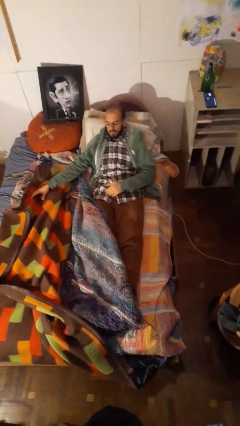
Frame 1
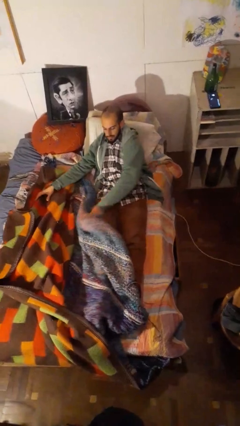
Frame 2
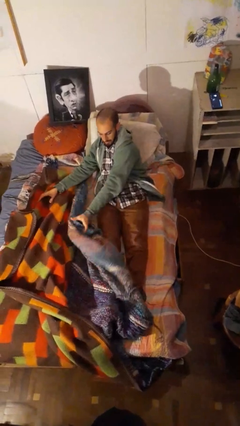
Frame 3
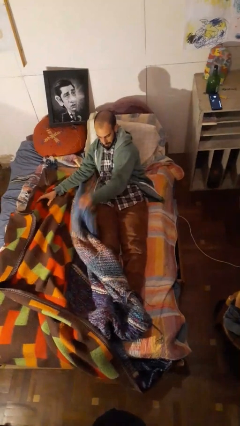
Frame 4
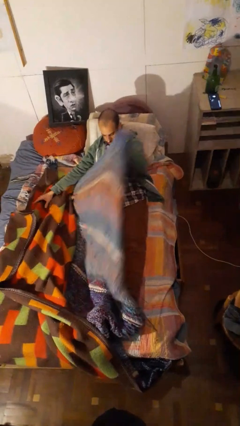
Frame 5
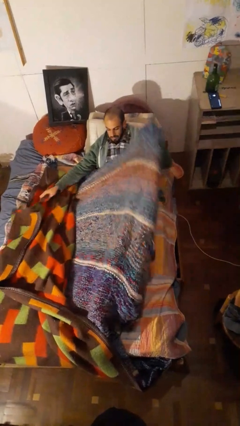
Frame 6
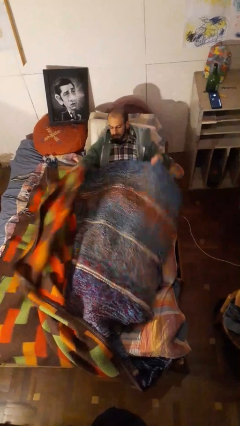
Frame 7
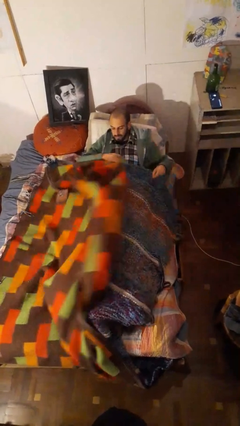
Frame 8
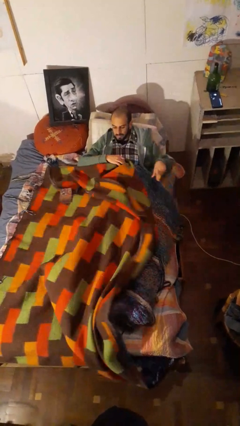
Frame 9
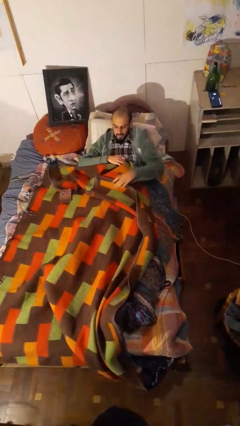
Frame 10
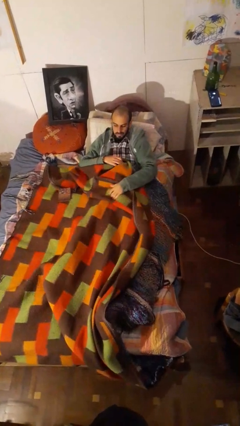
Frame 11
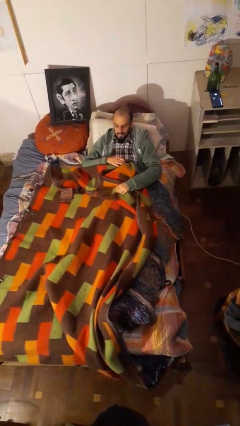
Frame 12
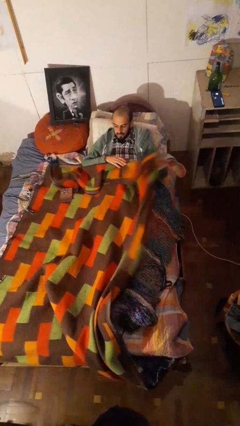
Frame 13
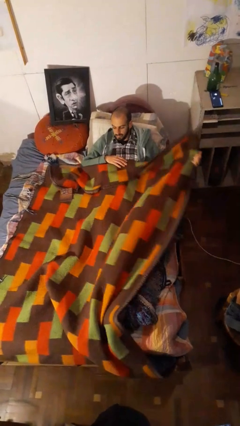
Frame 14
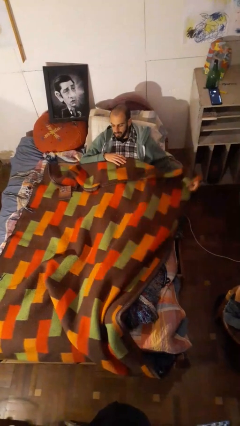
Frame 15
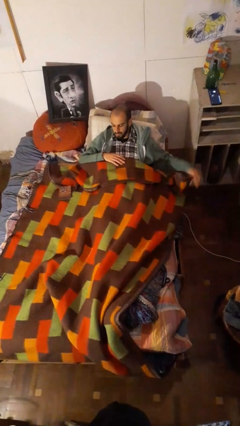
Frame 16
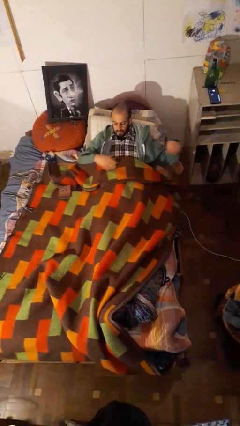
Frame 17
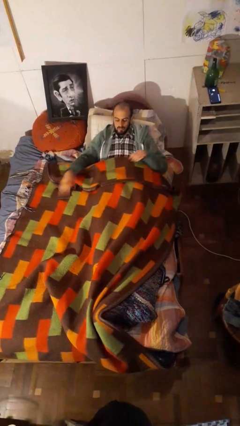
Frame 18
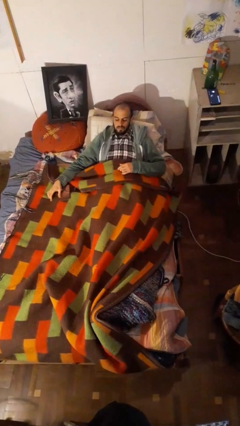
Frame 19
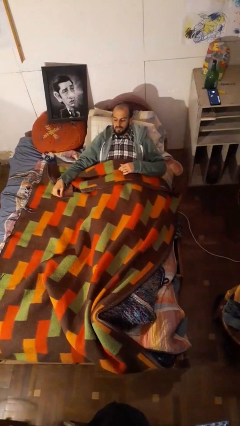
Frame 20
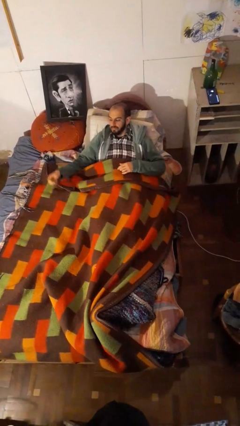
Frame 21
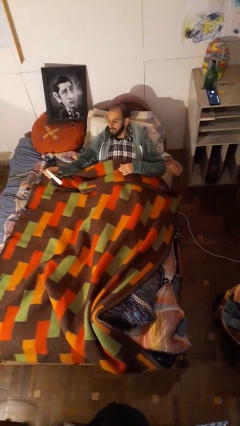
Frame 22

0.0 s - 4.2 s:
person covers with bedsheets

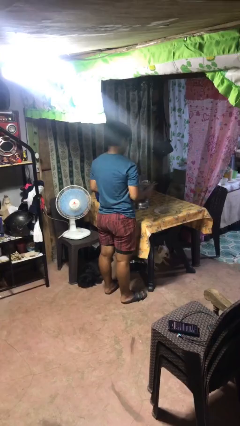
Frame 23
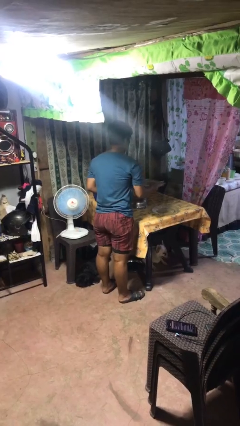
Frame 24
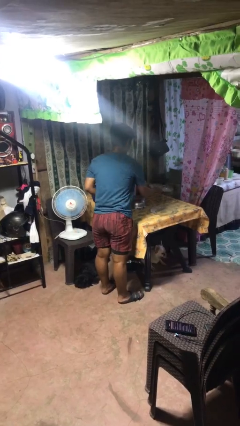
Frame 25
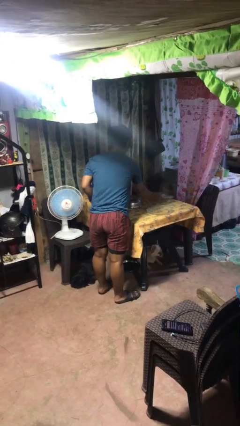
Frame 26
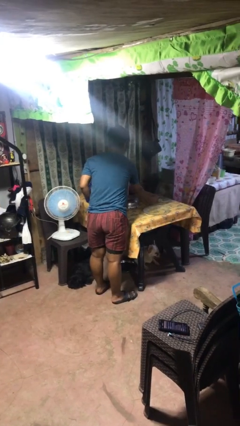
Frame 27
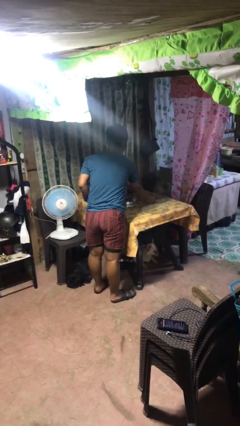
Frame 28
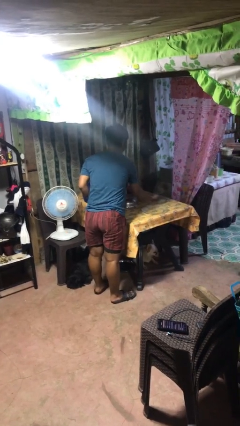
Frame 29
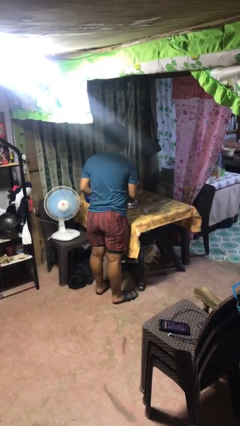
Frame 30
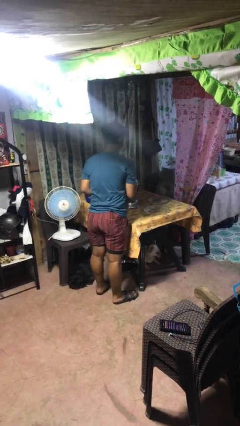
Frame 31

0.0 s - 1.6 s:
person sets table

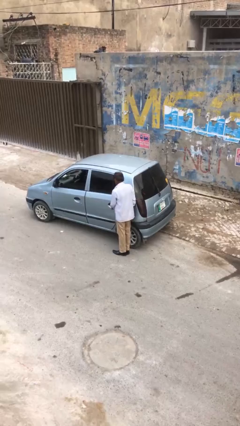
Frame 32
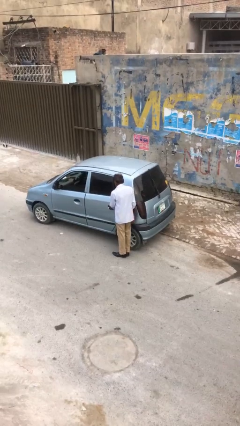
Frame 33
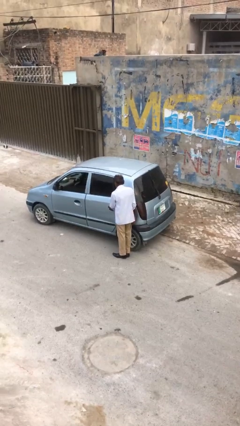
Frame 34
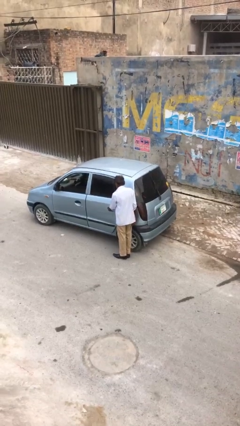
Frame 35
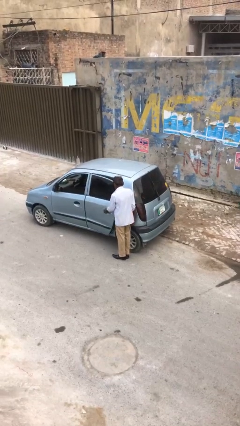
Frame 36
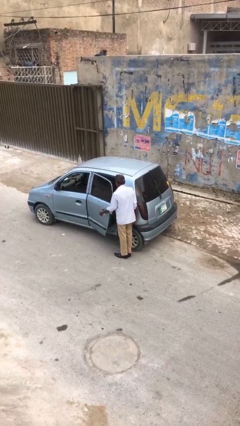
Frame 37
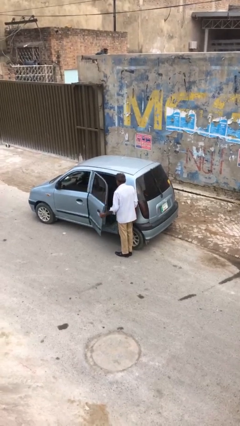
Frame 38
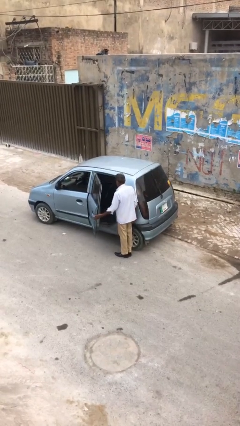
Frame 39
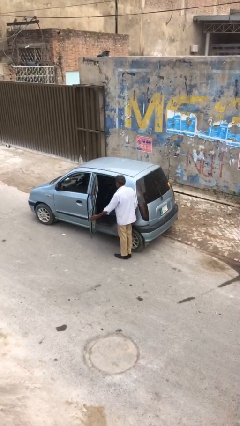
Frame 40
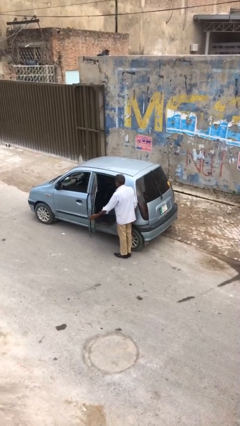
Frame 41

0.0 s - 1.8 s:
person opens car door

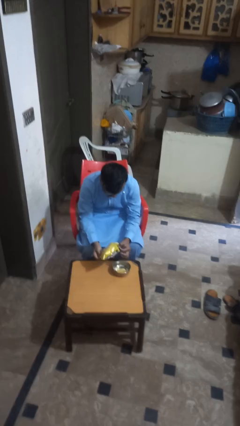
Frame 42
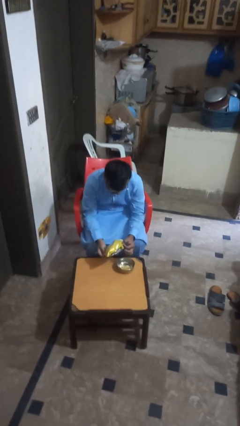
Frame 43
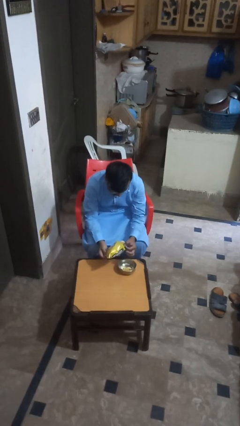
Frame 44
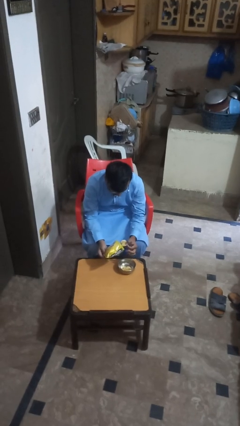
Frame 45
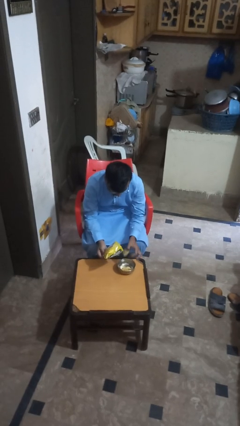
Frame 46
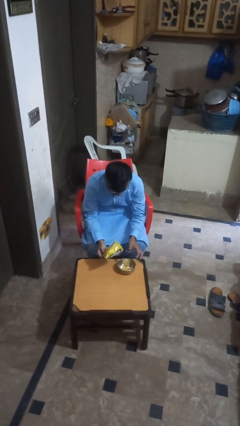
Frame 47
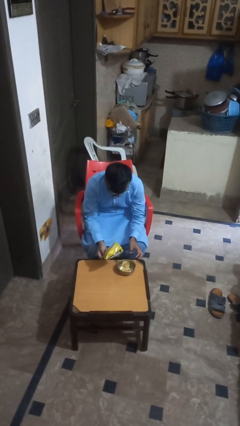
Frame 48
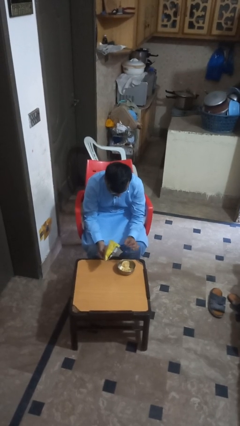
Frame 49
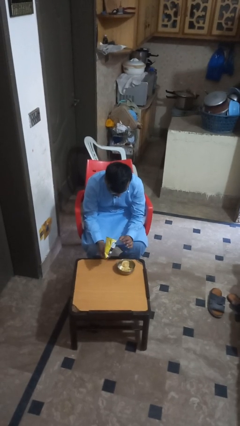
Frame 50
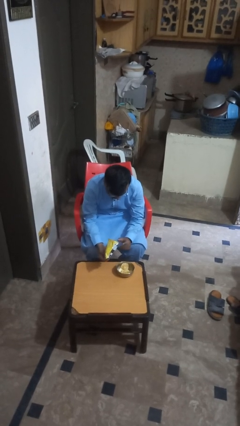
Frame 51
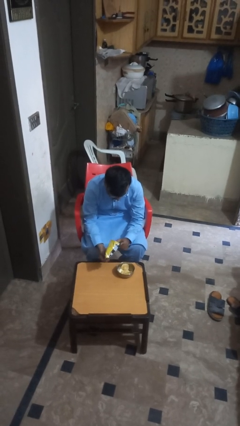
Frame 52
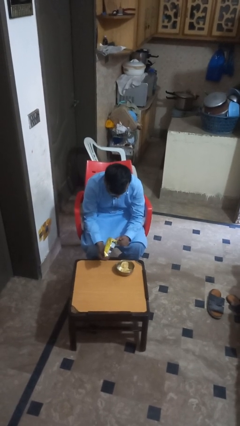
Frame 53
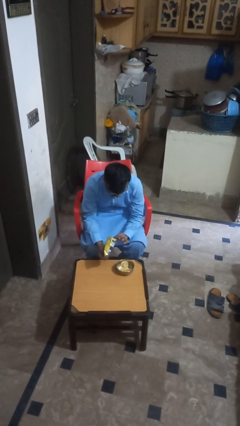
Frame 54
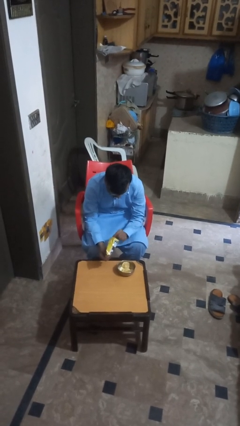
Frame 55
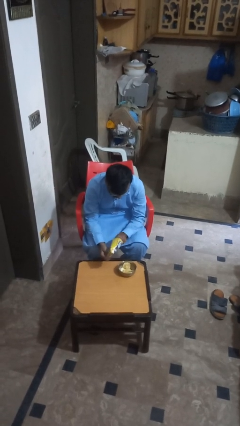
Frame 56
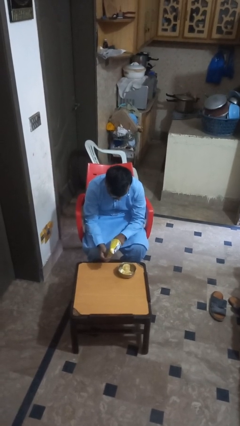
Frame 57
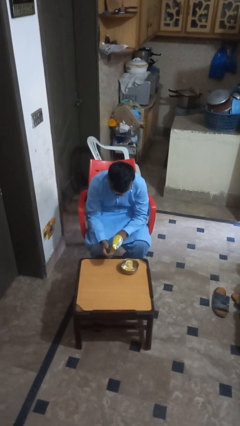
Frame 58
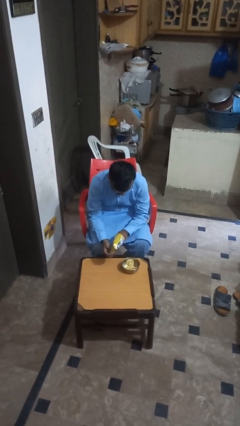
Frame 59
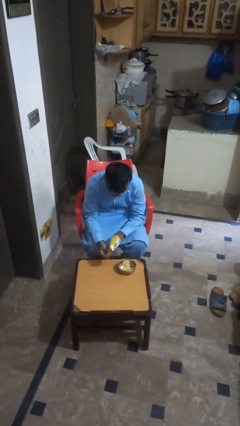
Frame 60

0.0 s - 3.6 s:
person pours into bowl

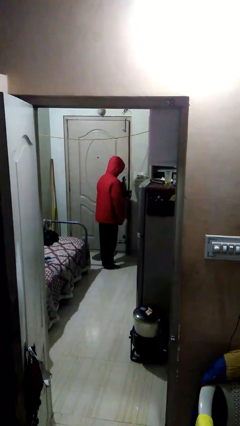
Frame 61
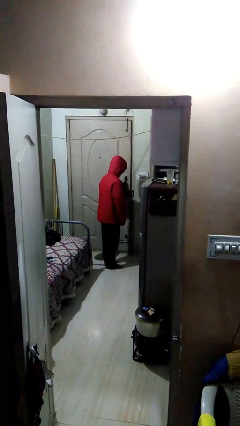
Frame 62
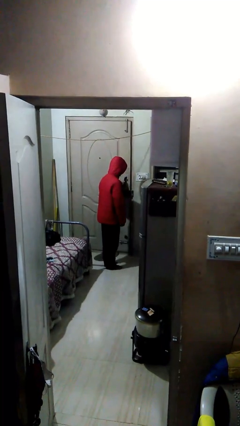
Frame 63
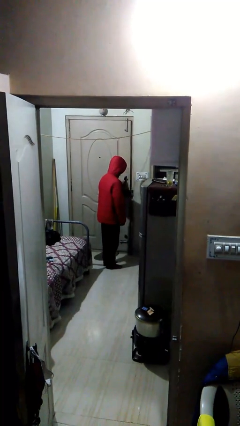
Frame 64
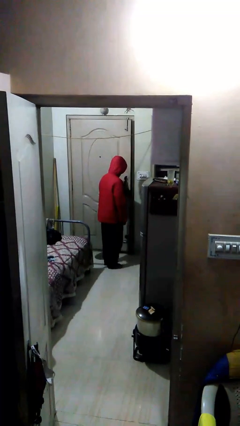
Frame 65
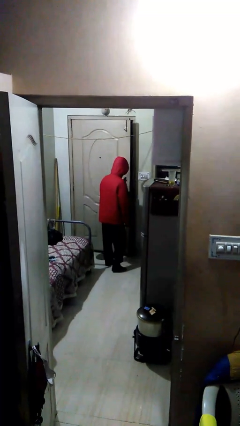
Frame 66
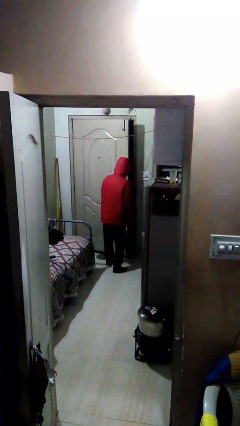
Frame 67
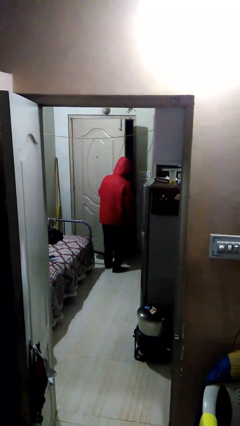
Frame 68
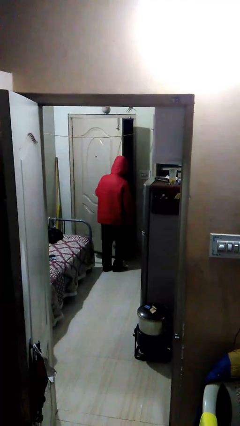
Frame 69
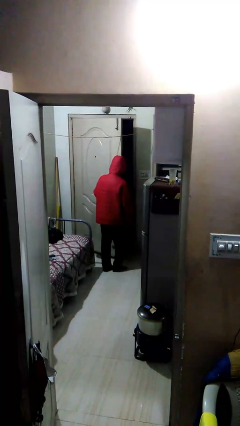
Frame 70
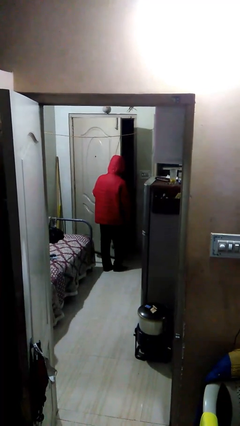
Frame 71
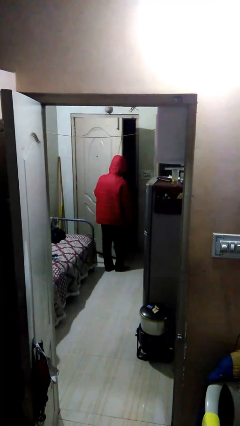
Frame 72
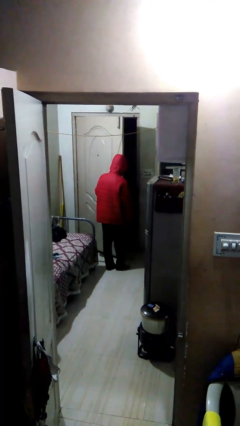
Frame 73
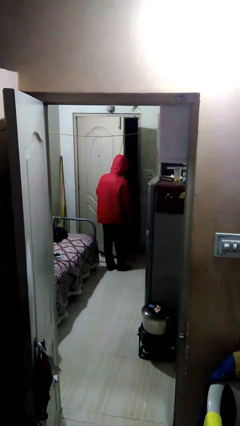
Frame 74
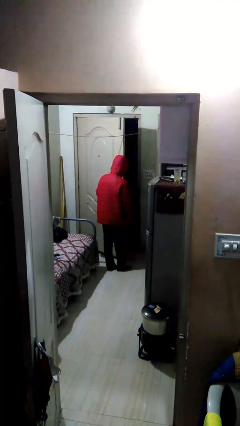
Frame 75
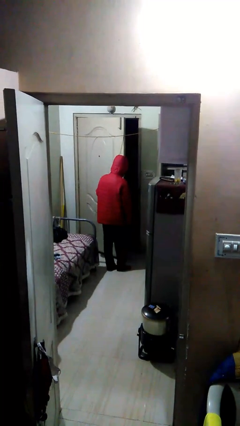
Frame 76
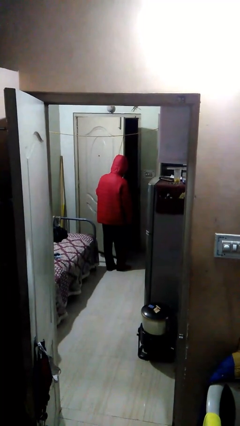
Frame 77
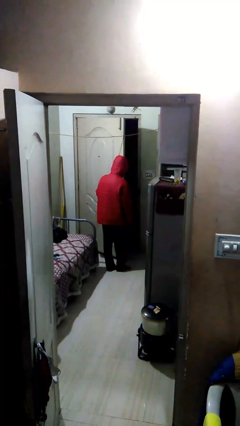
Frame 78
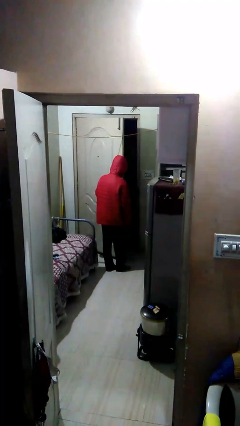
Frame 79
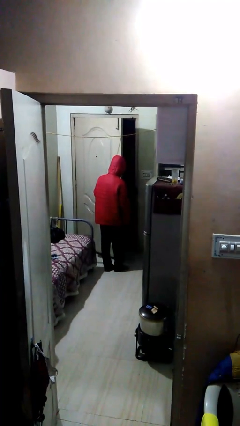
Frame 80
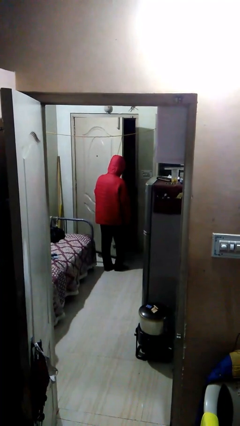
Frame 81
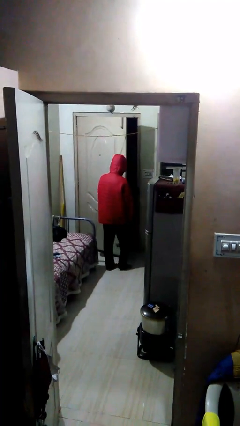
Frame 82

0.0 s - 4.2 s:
person opens facility door

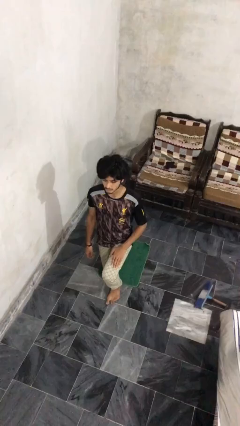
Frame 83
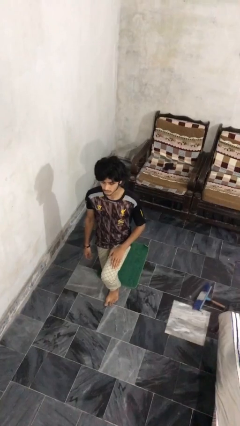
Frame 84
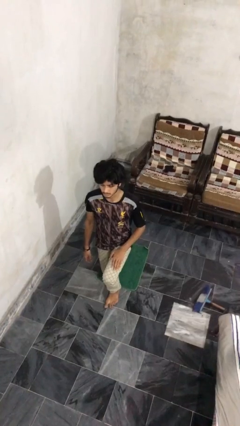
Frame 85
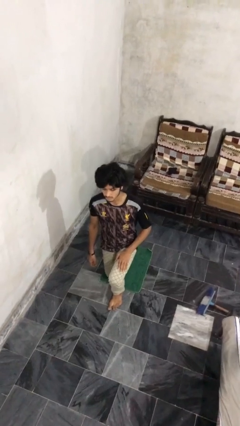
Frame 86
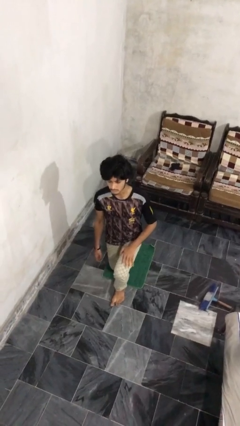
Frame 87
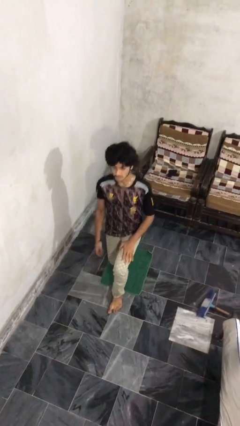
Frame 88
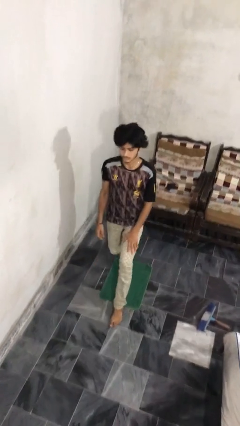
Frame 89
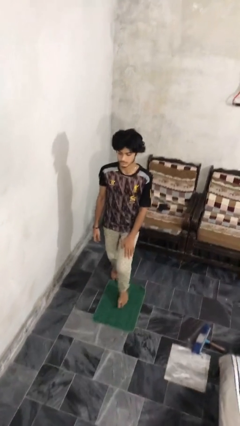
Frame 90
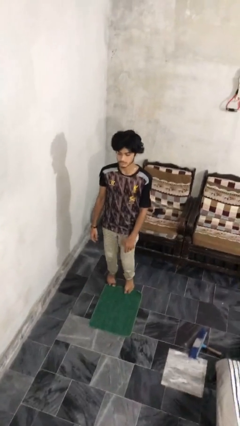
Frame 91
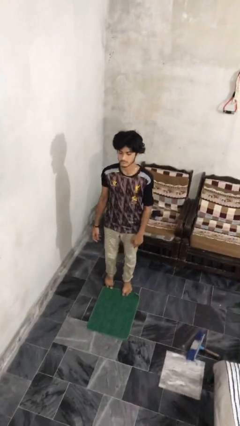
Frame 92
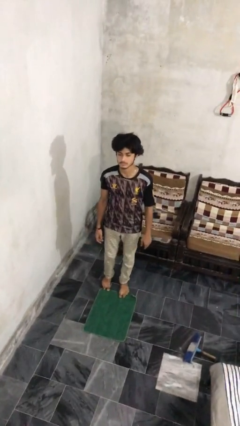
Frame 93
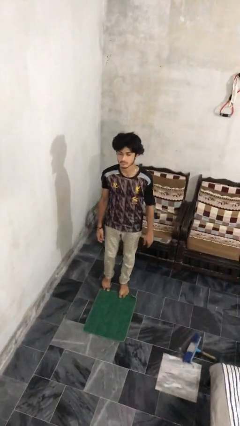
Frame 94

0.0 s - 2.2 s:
person stands up from floor
